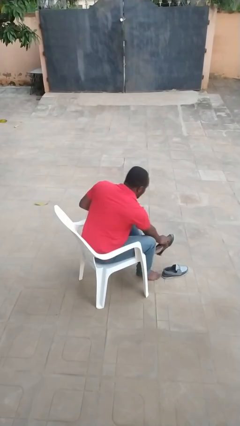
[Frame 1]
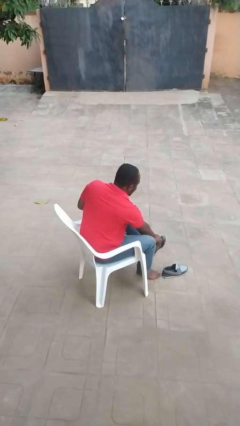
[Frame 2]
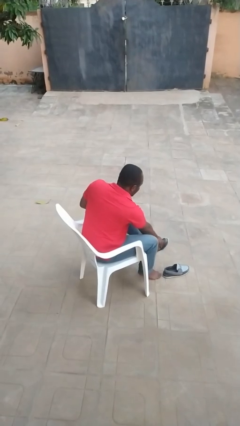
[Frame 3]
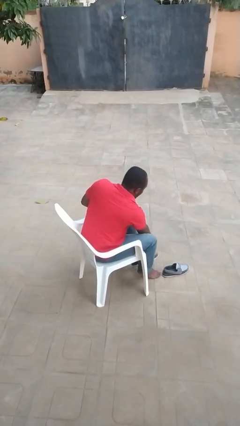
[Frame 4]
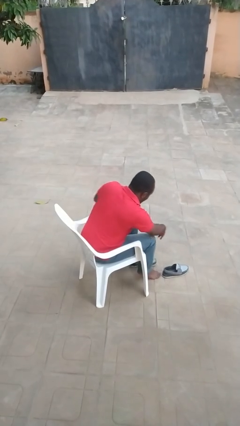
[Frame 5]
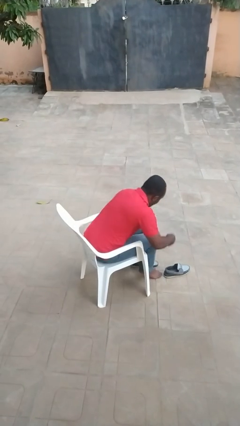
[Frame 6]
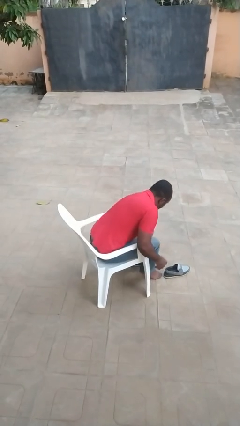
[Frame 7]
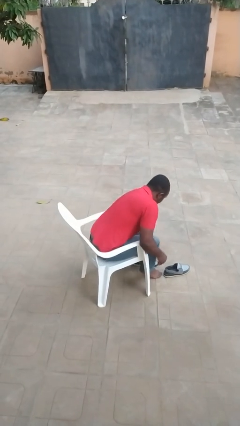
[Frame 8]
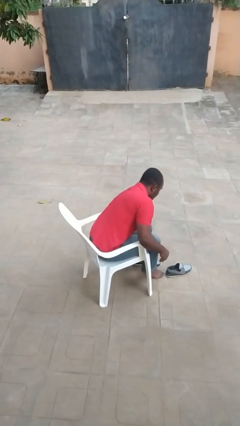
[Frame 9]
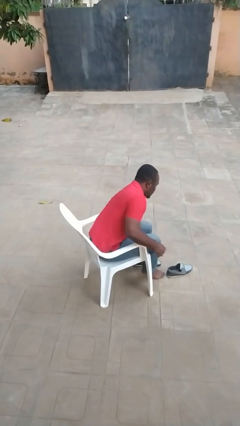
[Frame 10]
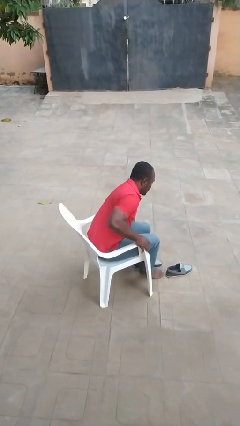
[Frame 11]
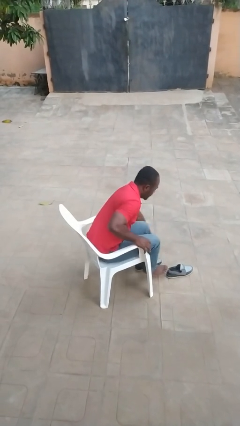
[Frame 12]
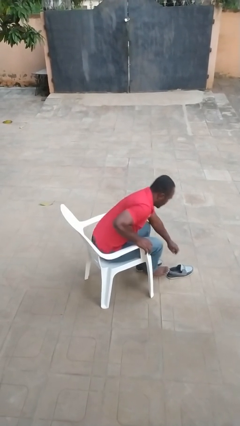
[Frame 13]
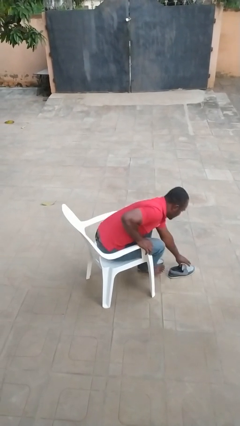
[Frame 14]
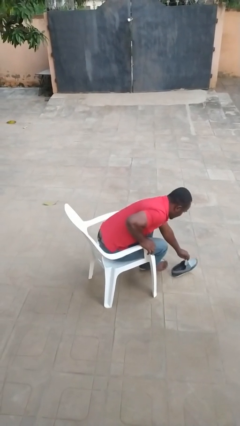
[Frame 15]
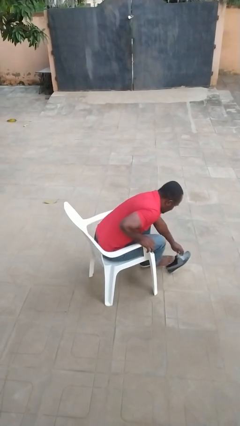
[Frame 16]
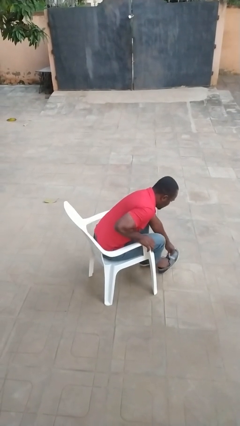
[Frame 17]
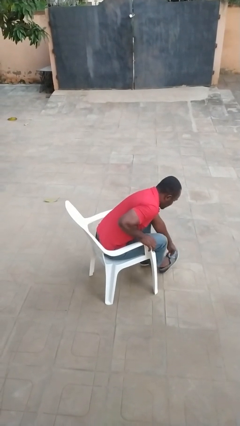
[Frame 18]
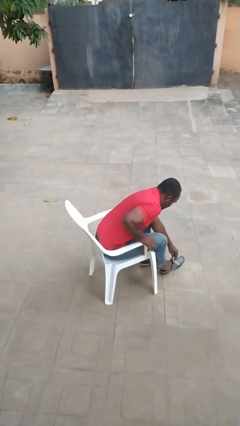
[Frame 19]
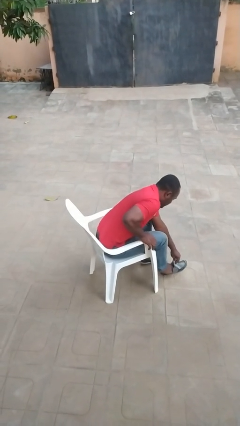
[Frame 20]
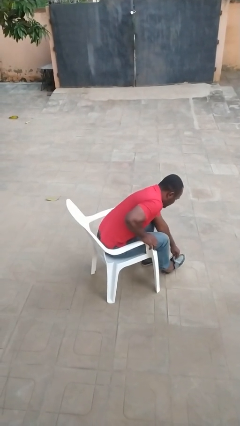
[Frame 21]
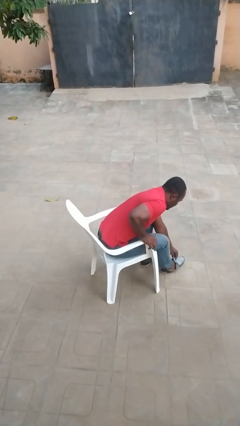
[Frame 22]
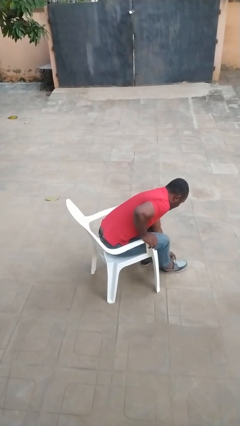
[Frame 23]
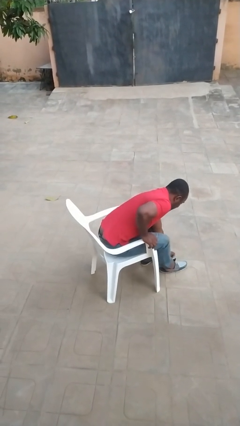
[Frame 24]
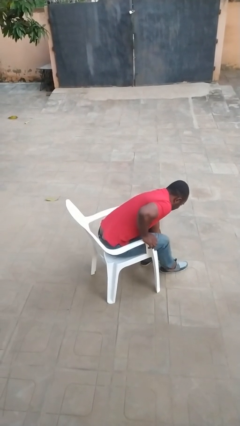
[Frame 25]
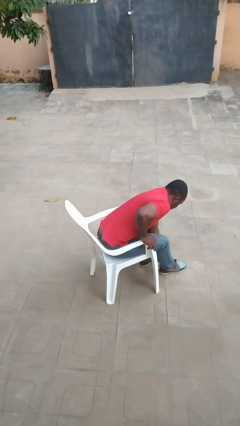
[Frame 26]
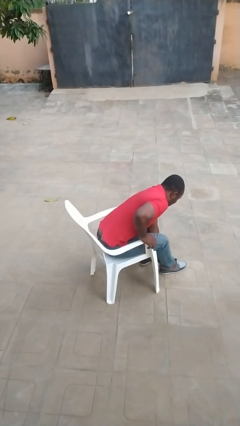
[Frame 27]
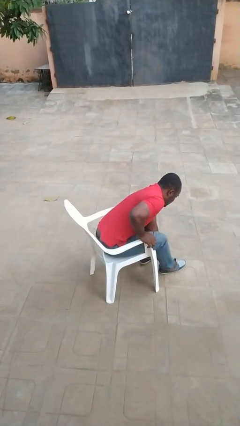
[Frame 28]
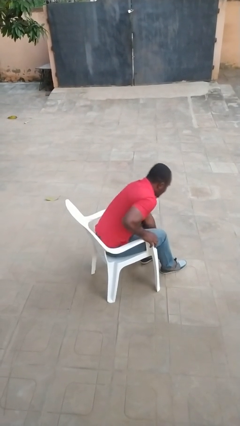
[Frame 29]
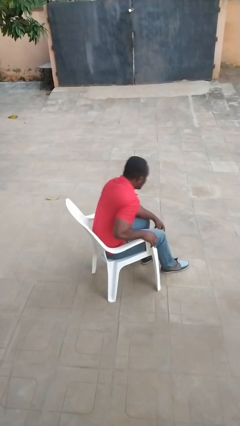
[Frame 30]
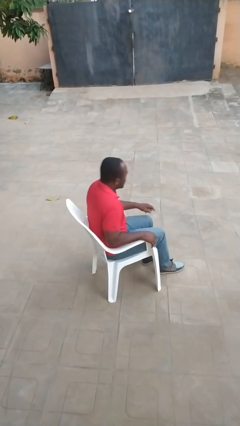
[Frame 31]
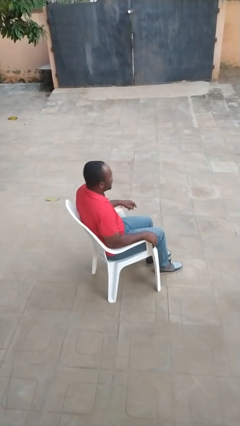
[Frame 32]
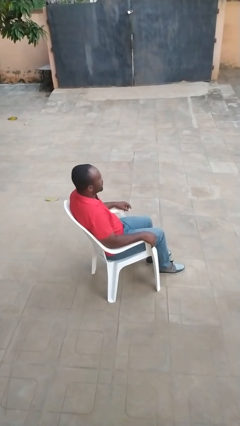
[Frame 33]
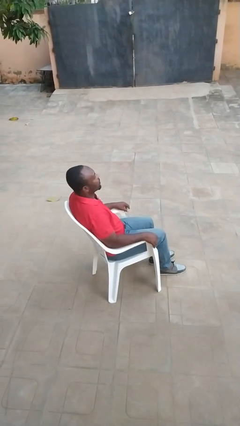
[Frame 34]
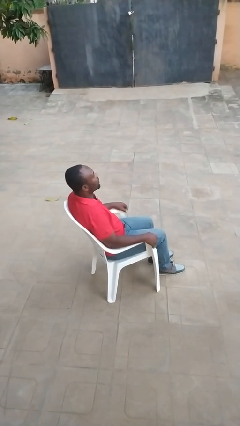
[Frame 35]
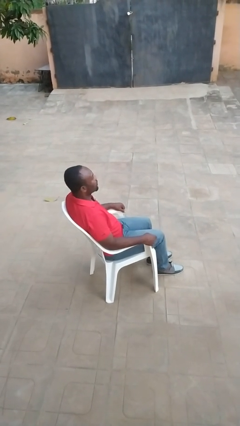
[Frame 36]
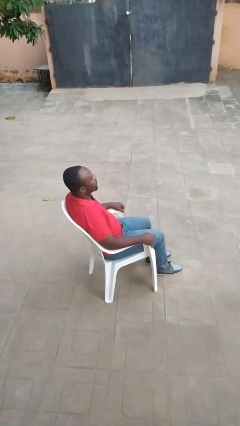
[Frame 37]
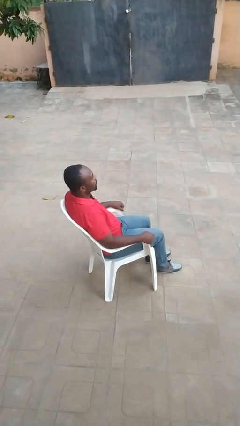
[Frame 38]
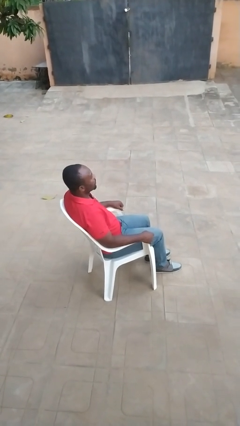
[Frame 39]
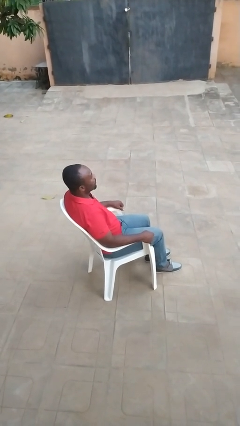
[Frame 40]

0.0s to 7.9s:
person puts on shoes

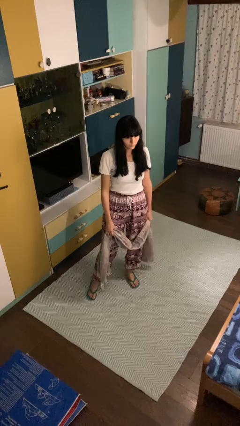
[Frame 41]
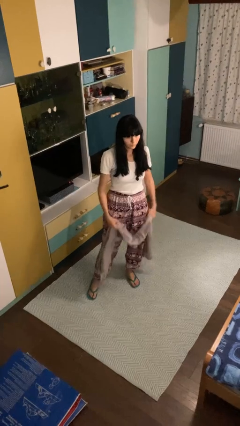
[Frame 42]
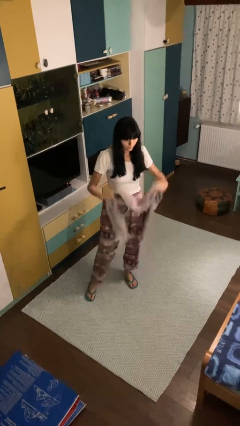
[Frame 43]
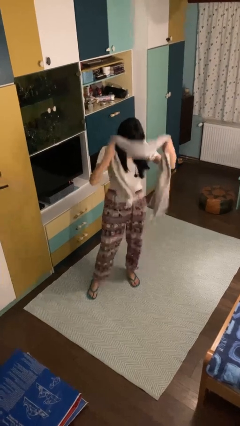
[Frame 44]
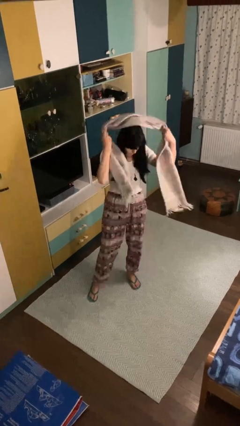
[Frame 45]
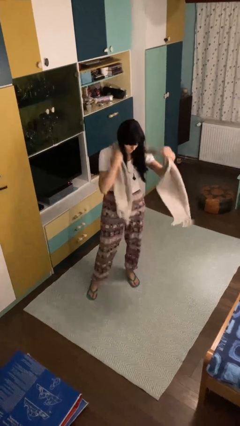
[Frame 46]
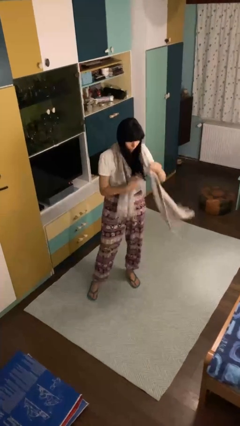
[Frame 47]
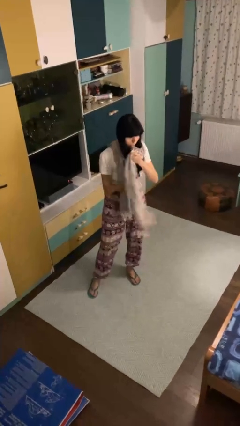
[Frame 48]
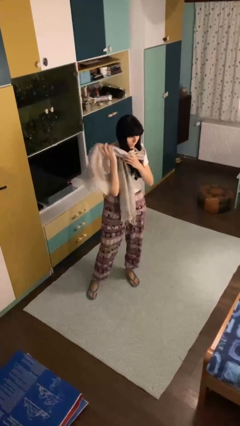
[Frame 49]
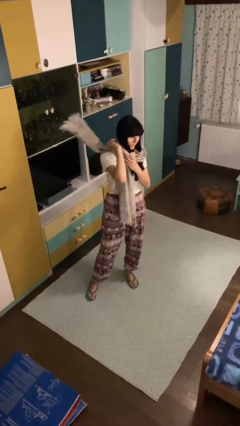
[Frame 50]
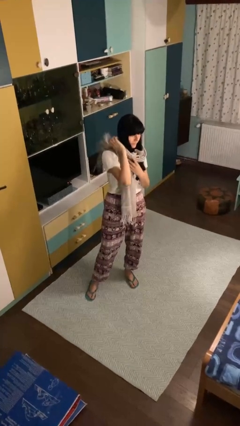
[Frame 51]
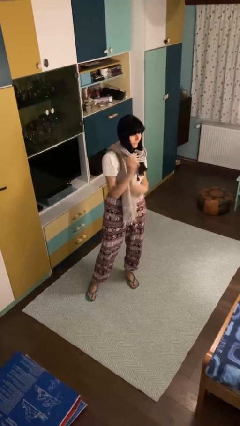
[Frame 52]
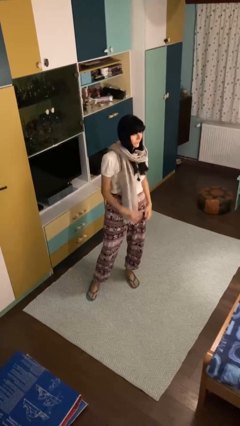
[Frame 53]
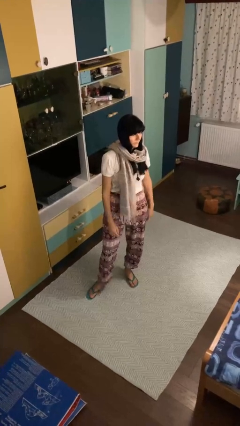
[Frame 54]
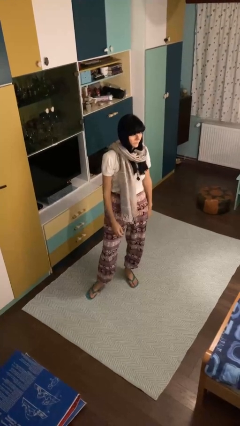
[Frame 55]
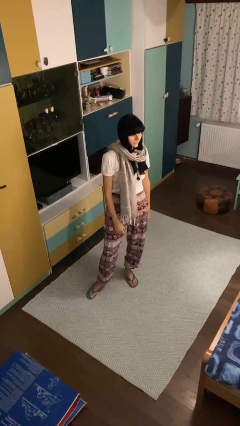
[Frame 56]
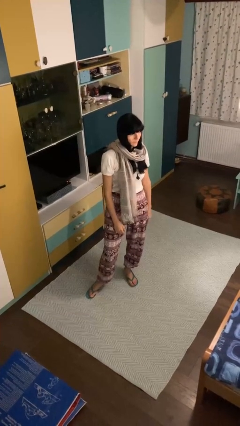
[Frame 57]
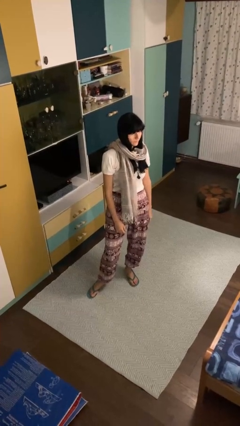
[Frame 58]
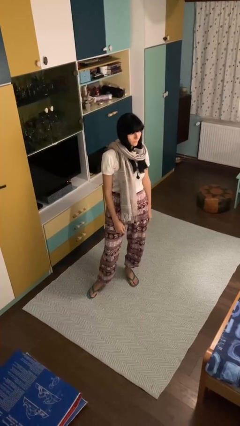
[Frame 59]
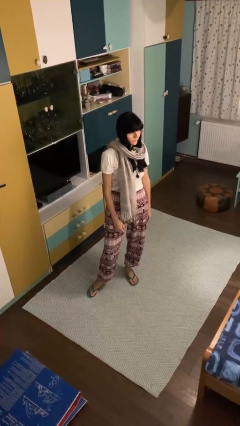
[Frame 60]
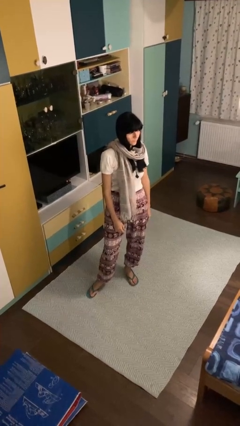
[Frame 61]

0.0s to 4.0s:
person puts on scarf

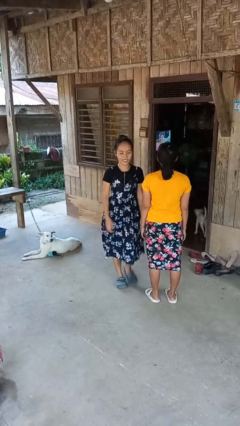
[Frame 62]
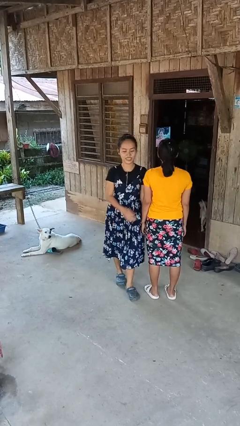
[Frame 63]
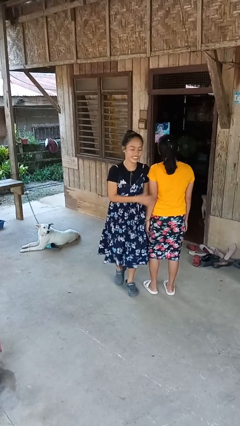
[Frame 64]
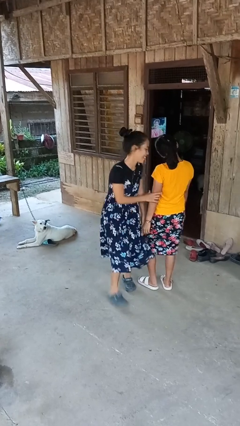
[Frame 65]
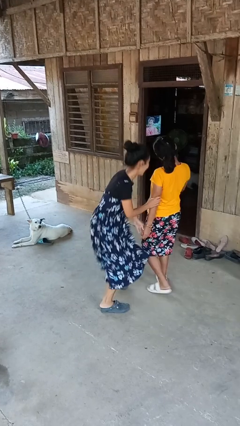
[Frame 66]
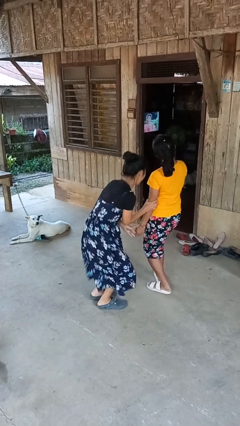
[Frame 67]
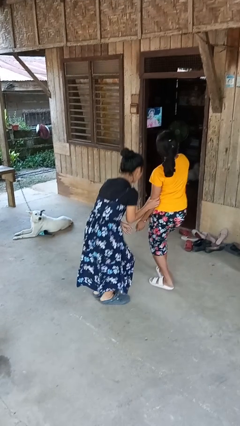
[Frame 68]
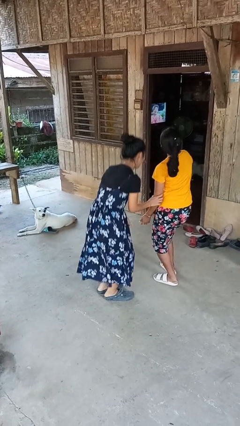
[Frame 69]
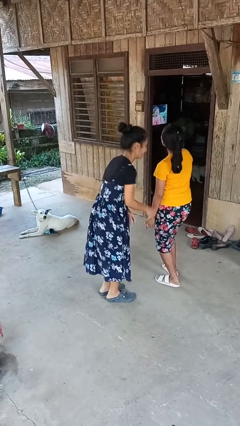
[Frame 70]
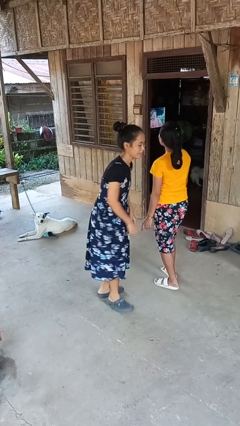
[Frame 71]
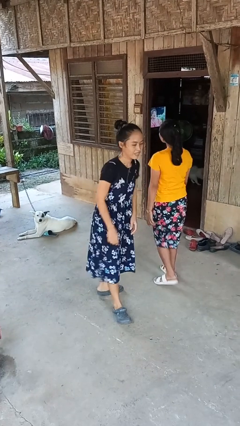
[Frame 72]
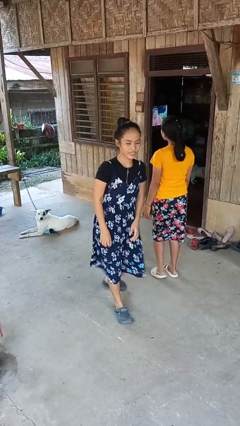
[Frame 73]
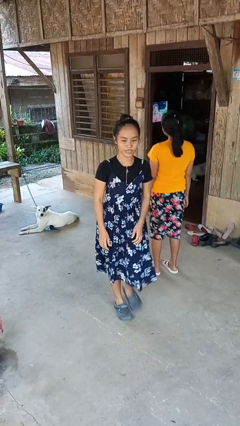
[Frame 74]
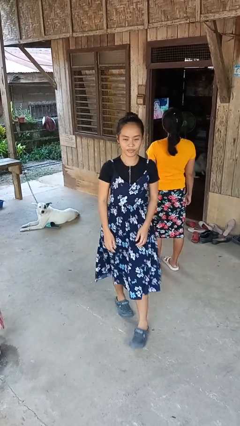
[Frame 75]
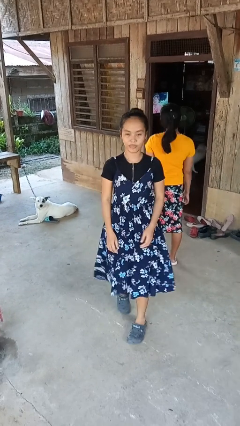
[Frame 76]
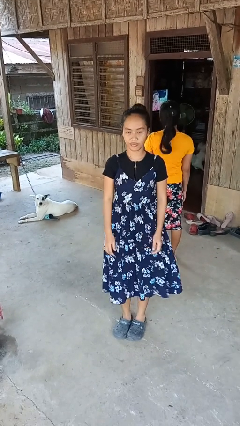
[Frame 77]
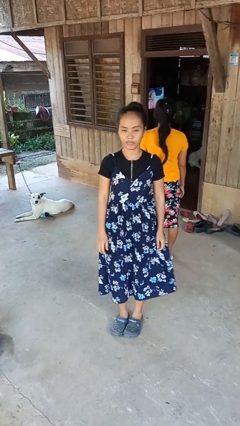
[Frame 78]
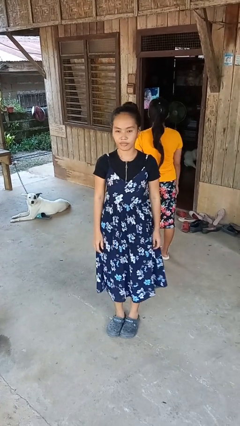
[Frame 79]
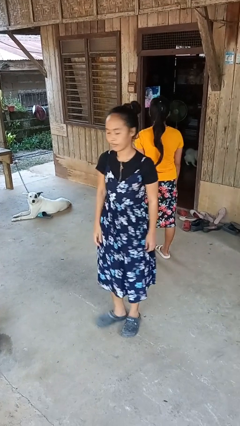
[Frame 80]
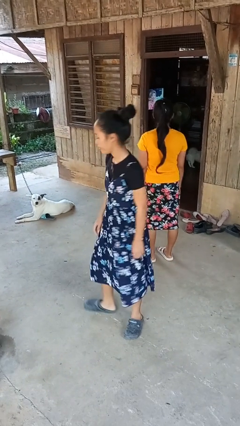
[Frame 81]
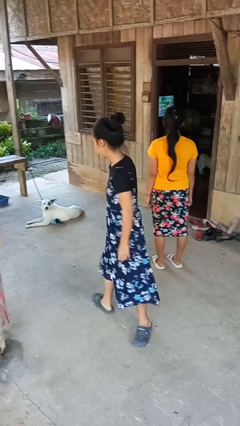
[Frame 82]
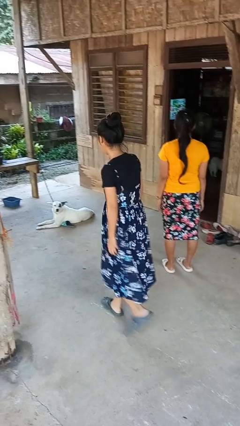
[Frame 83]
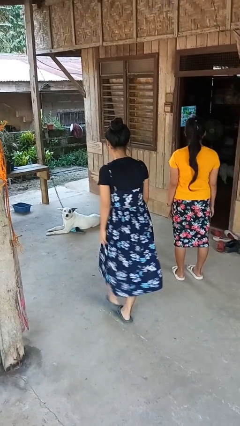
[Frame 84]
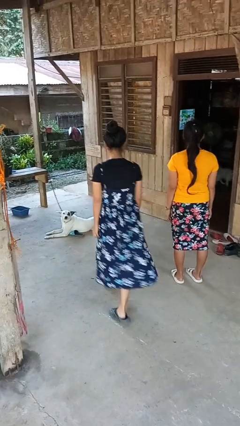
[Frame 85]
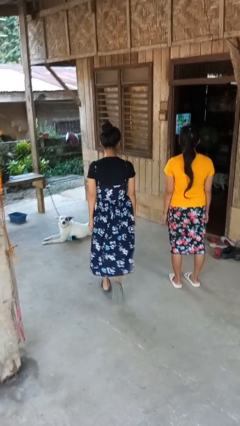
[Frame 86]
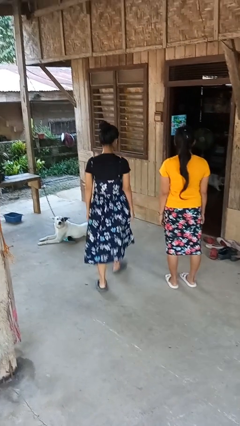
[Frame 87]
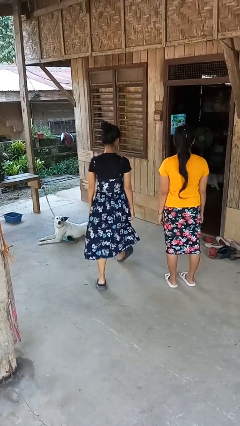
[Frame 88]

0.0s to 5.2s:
person bumps into person

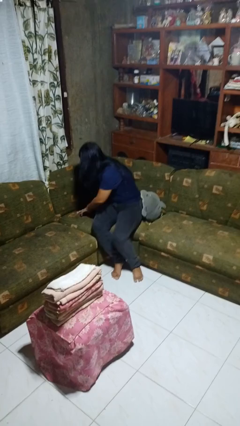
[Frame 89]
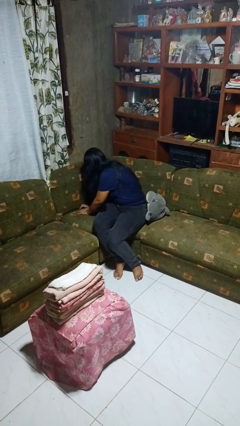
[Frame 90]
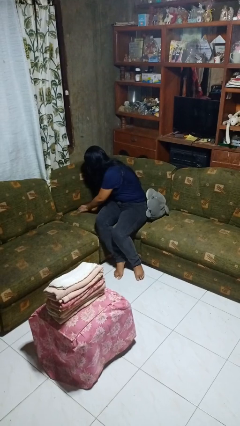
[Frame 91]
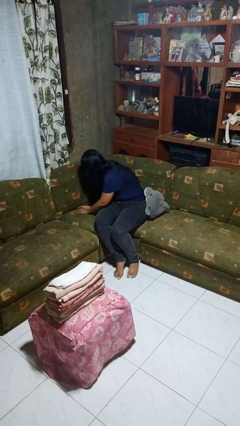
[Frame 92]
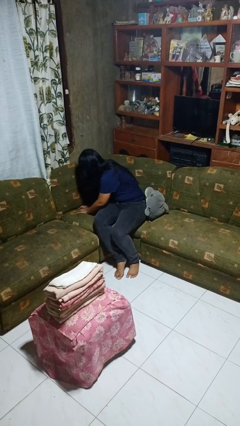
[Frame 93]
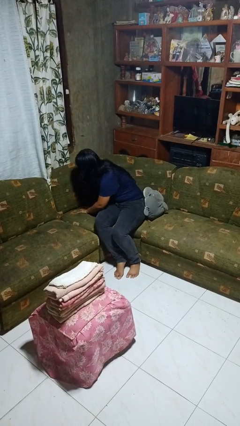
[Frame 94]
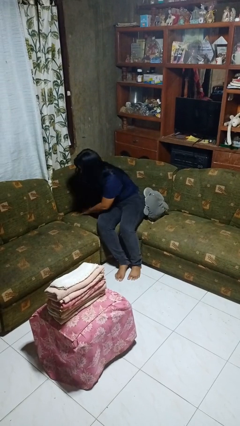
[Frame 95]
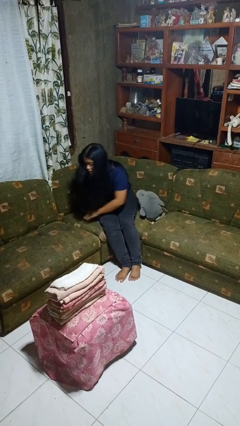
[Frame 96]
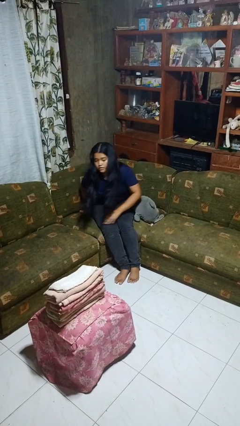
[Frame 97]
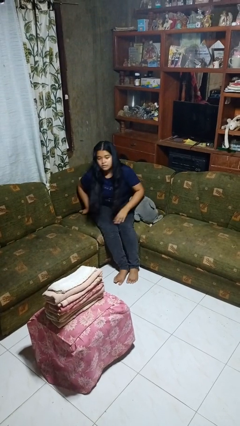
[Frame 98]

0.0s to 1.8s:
person searches in couch
